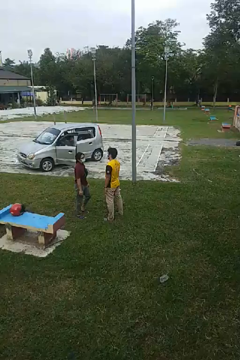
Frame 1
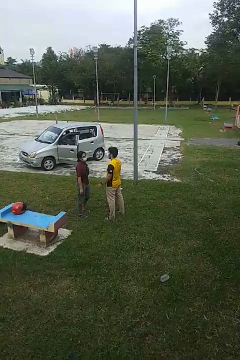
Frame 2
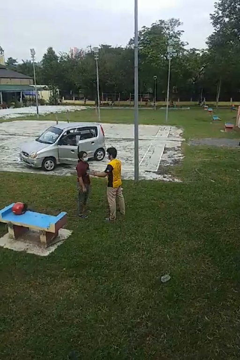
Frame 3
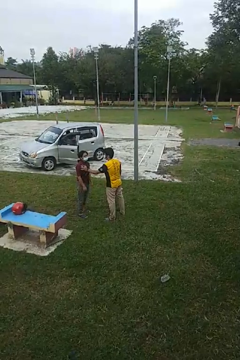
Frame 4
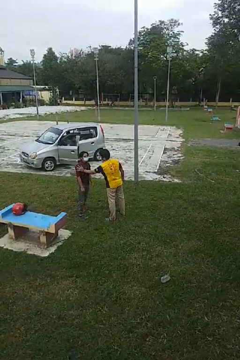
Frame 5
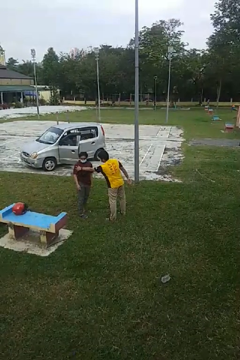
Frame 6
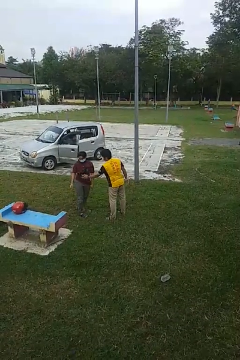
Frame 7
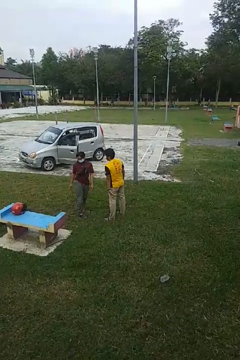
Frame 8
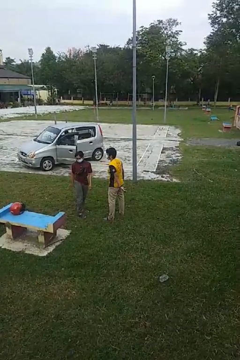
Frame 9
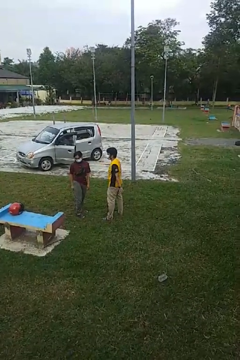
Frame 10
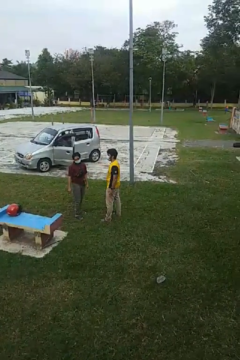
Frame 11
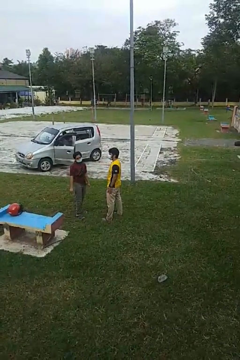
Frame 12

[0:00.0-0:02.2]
person shoves person

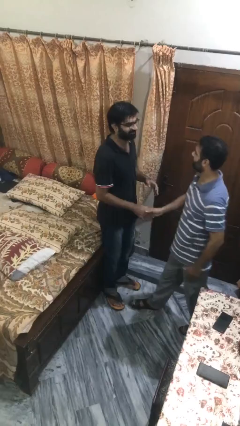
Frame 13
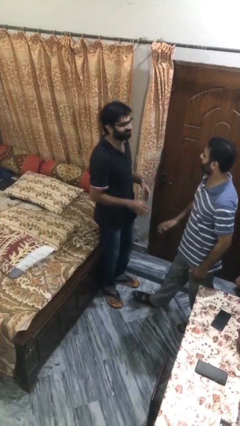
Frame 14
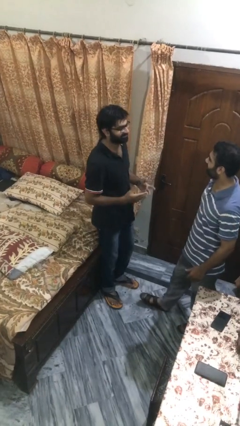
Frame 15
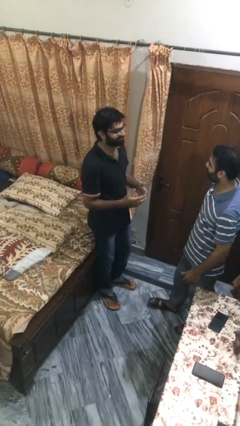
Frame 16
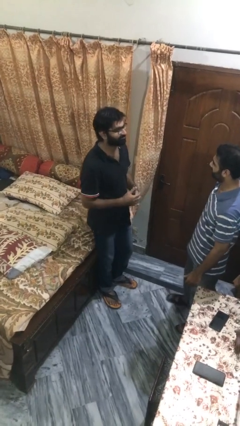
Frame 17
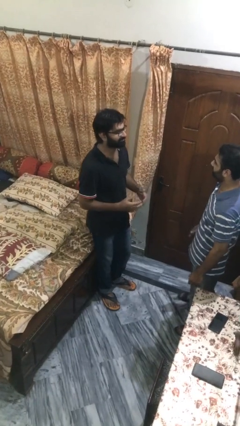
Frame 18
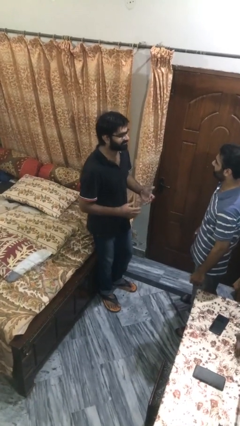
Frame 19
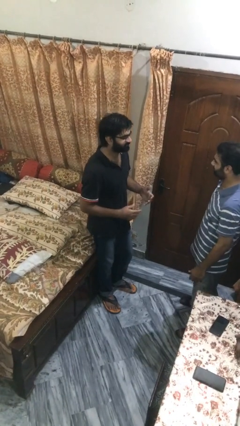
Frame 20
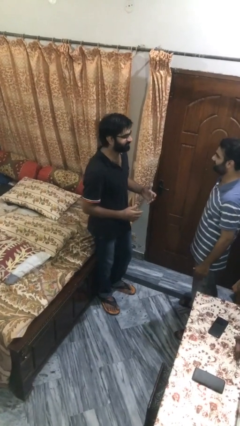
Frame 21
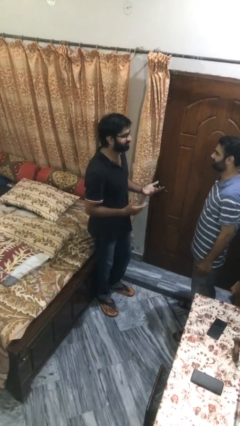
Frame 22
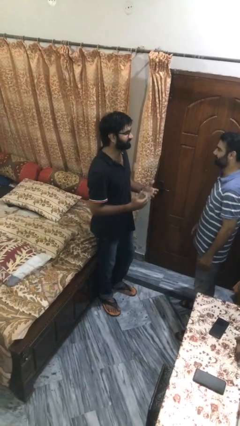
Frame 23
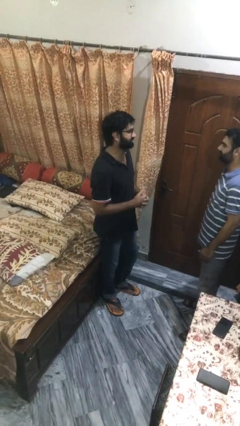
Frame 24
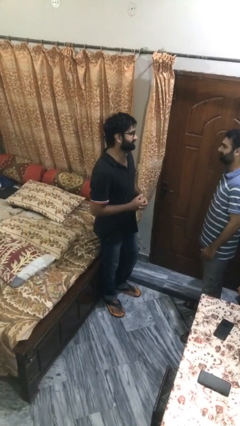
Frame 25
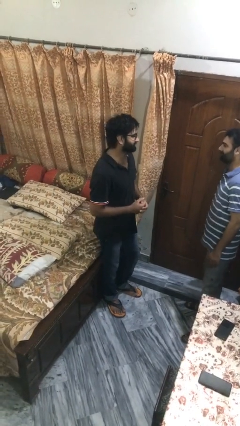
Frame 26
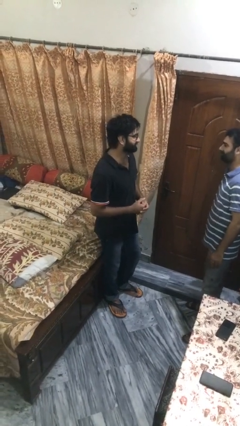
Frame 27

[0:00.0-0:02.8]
person talks to person

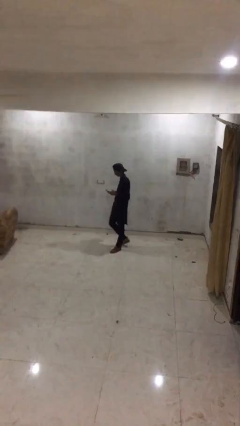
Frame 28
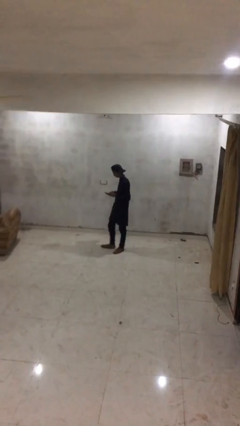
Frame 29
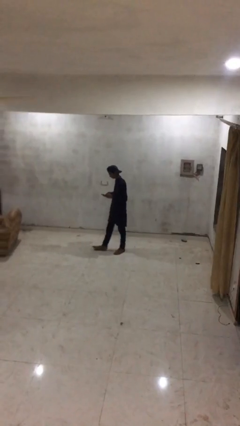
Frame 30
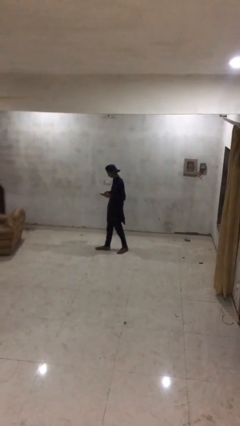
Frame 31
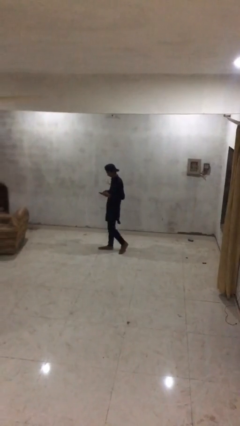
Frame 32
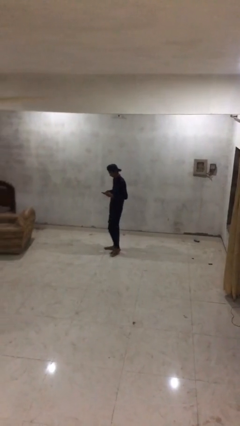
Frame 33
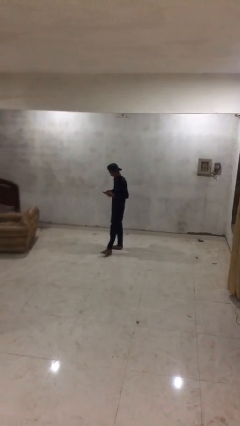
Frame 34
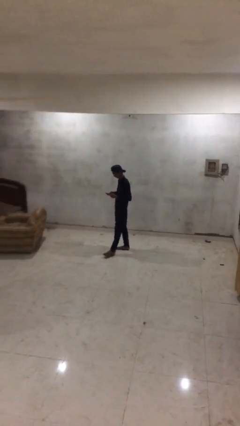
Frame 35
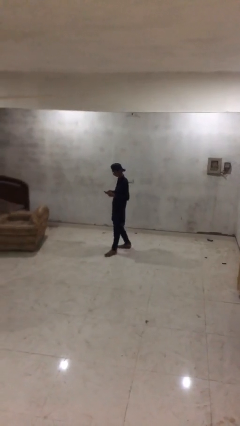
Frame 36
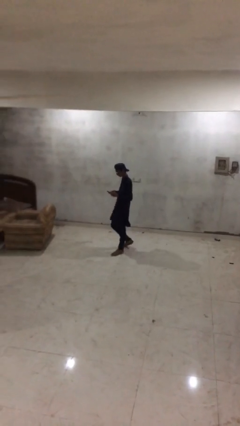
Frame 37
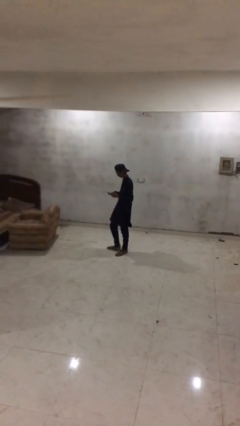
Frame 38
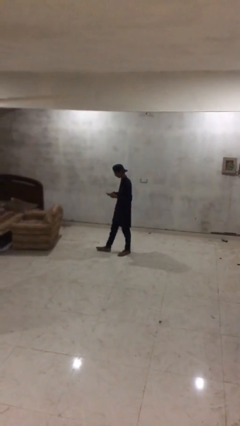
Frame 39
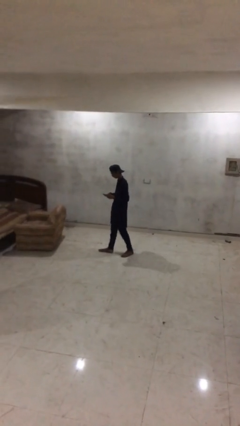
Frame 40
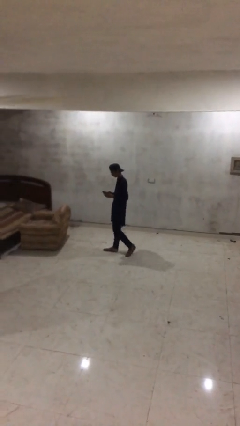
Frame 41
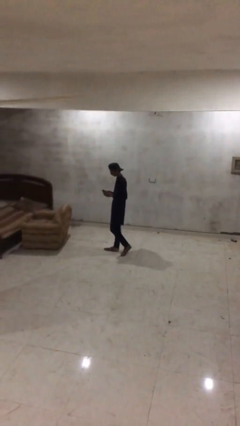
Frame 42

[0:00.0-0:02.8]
person texts on phone

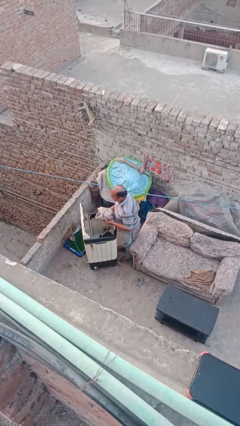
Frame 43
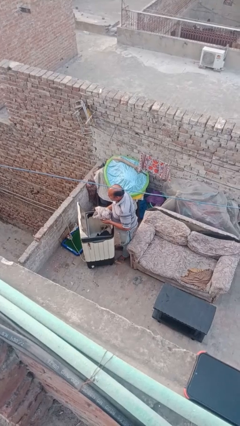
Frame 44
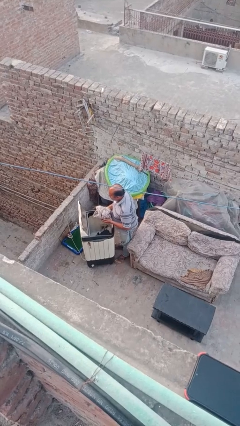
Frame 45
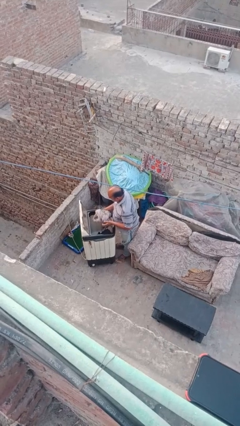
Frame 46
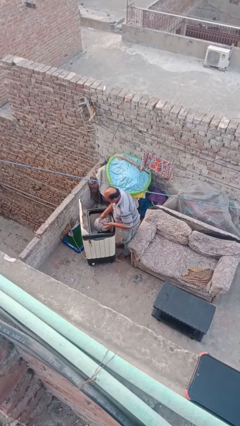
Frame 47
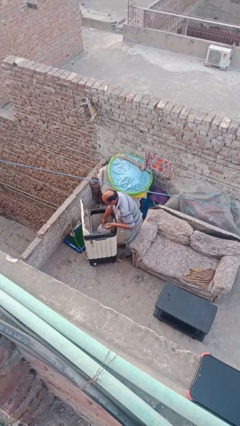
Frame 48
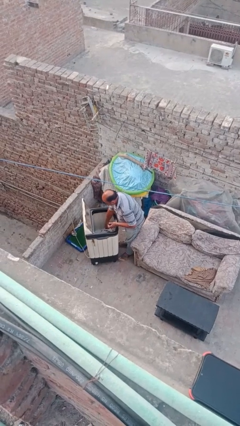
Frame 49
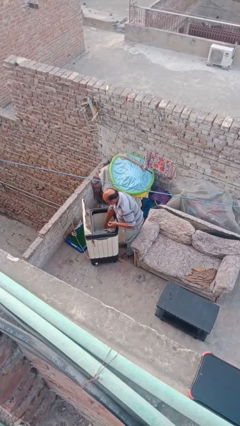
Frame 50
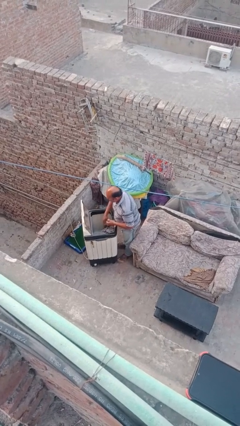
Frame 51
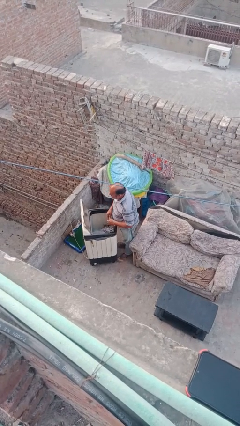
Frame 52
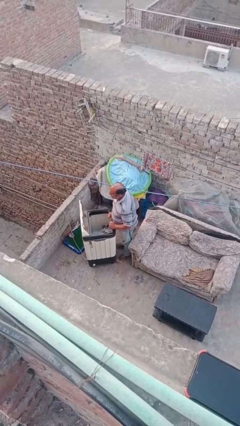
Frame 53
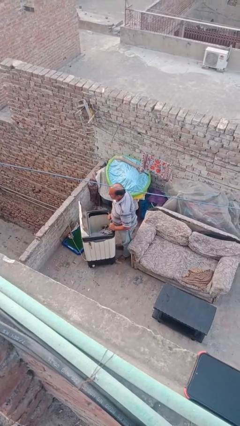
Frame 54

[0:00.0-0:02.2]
person loads clotheswasher

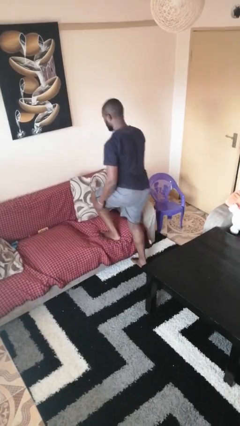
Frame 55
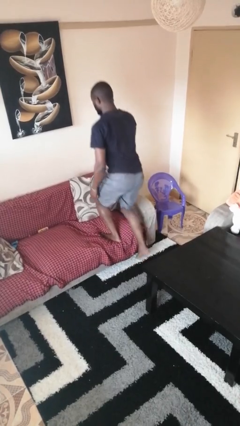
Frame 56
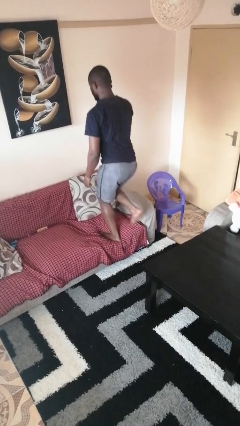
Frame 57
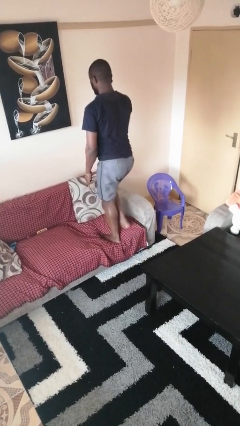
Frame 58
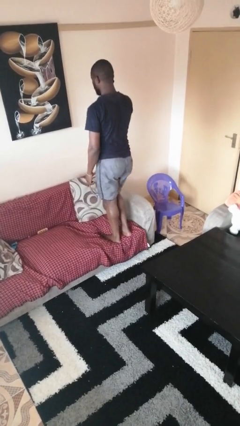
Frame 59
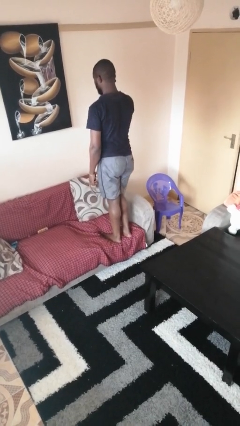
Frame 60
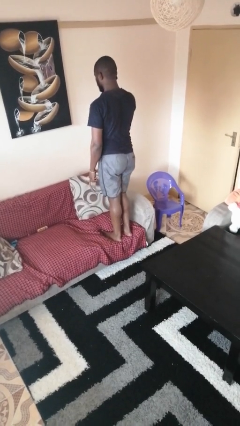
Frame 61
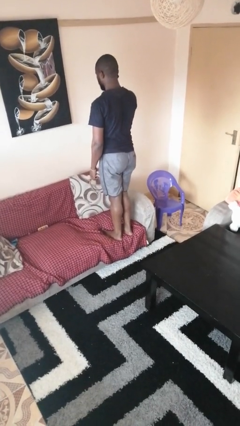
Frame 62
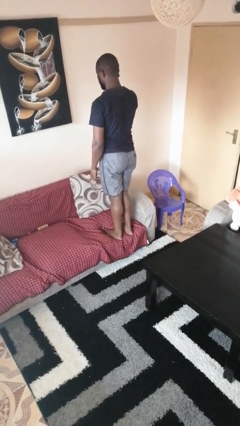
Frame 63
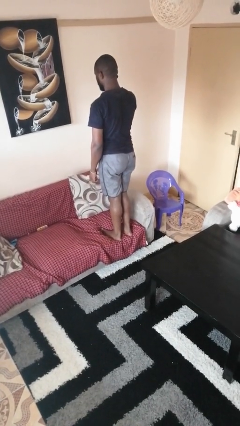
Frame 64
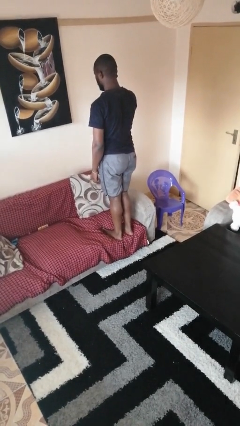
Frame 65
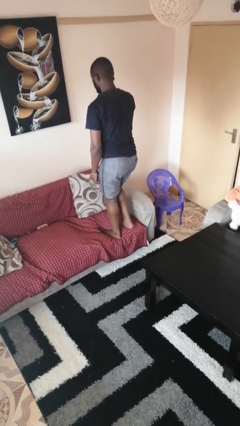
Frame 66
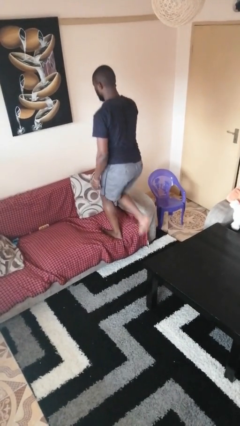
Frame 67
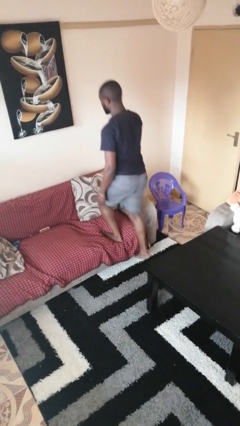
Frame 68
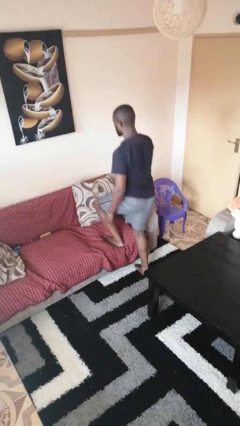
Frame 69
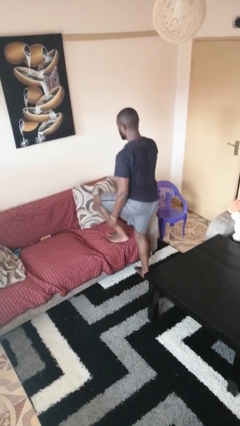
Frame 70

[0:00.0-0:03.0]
person climbs on couch

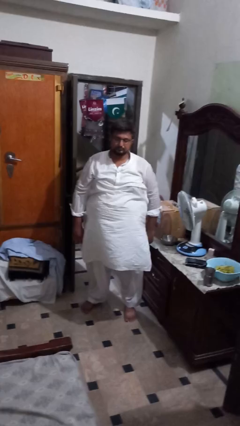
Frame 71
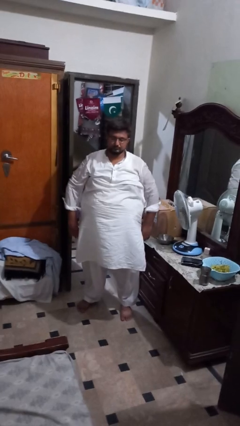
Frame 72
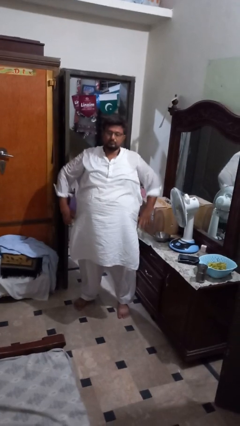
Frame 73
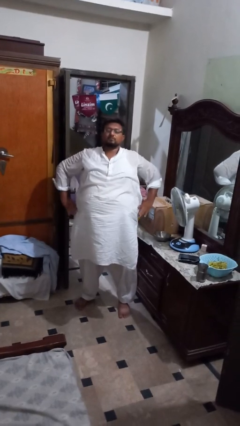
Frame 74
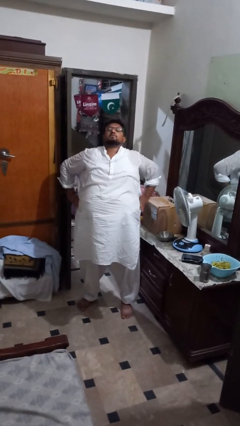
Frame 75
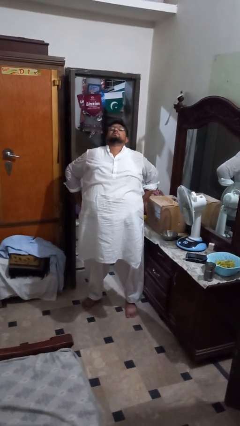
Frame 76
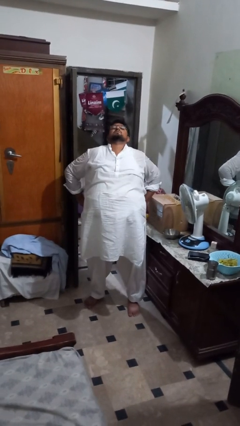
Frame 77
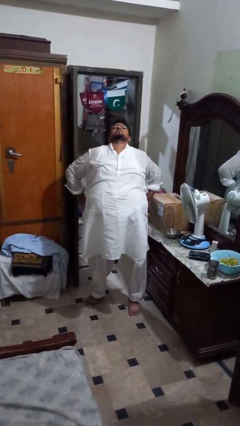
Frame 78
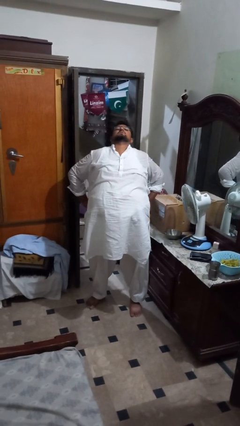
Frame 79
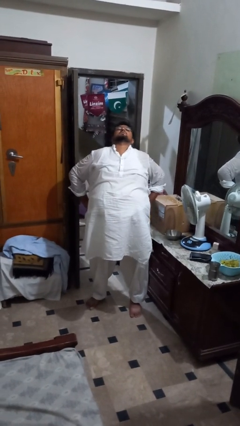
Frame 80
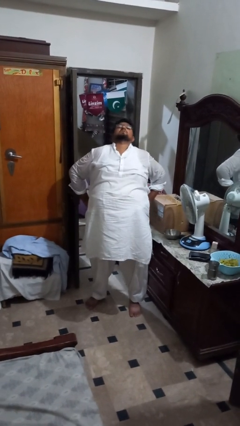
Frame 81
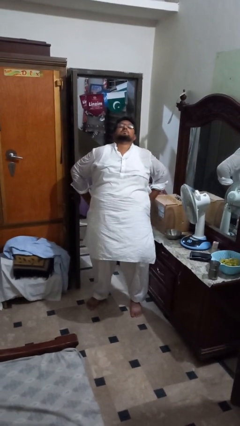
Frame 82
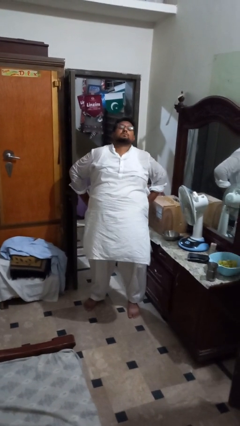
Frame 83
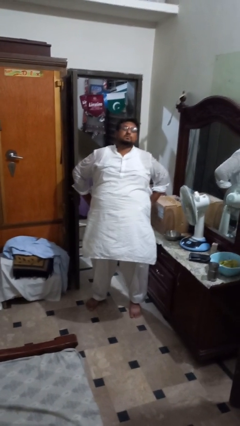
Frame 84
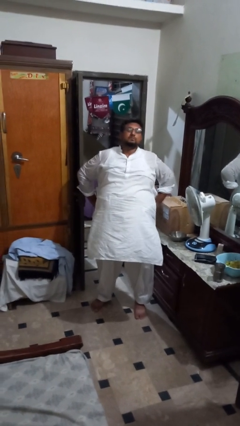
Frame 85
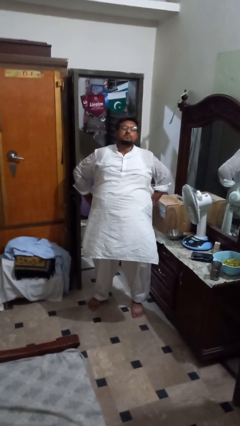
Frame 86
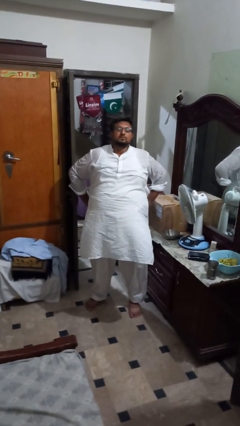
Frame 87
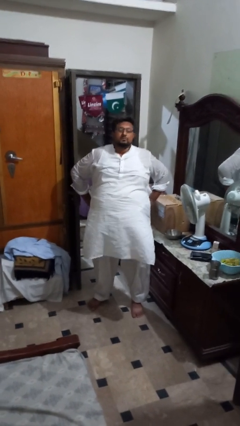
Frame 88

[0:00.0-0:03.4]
person stretches back

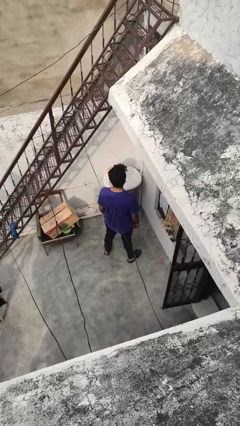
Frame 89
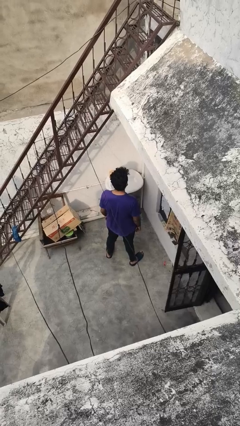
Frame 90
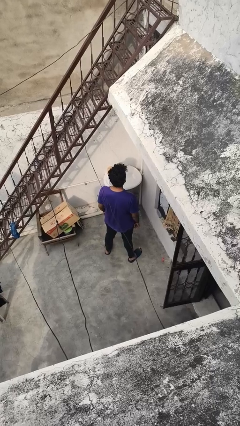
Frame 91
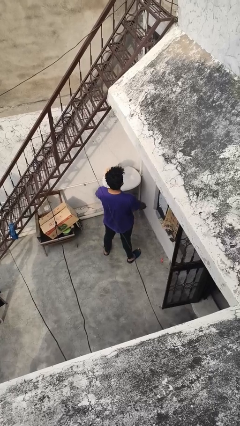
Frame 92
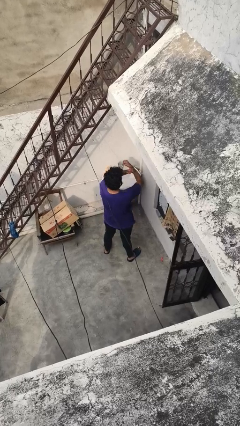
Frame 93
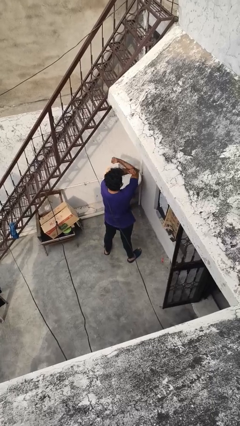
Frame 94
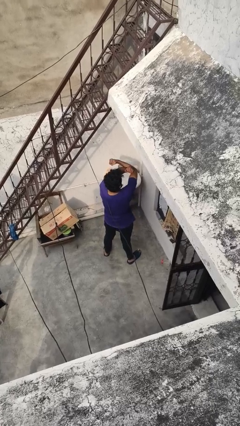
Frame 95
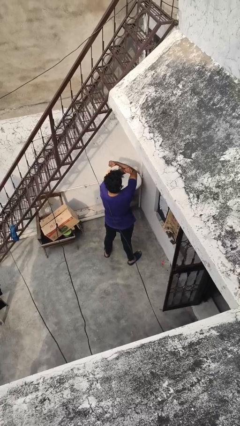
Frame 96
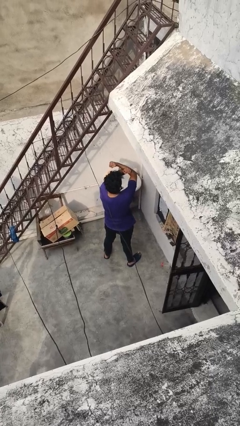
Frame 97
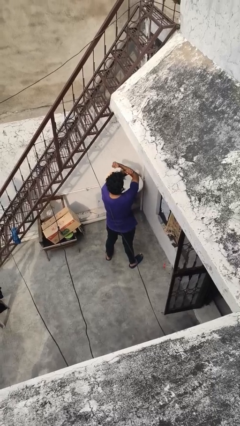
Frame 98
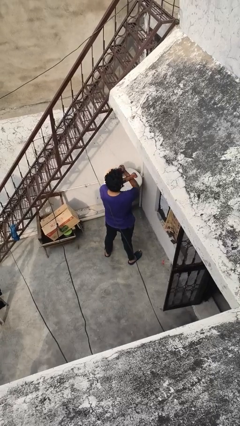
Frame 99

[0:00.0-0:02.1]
person gestures arms x
